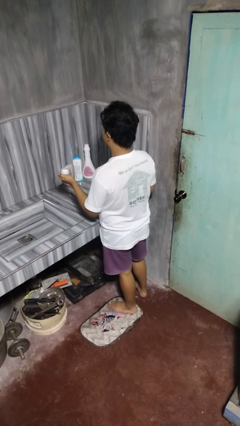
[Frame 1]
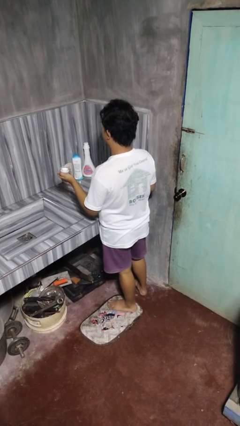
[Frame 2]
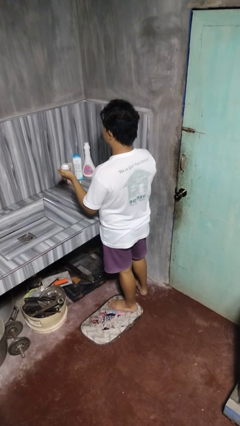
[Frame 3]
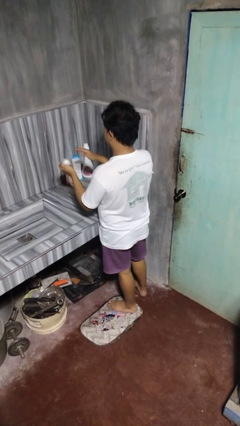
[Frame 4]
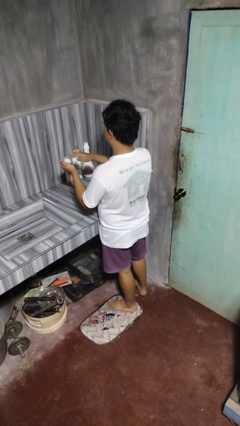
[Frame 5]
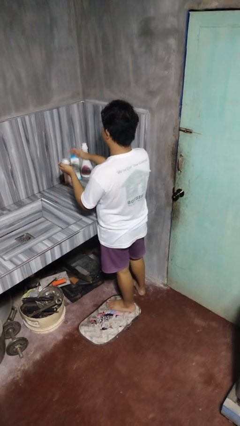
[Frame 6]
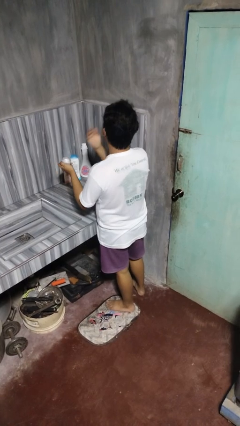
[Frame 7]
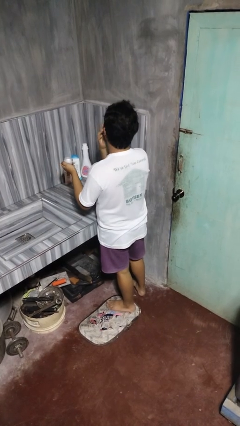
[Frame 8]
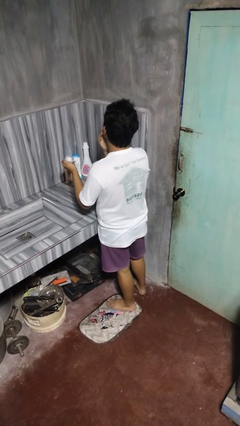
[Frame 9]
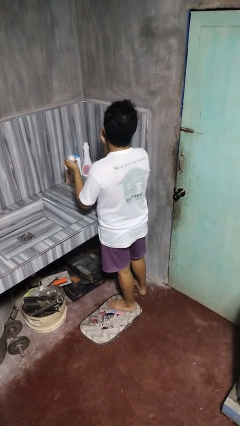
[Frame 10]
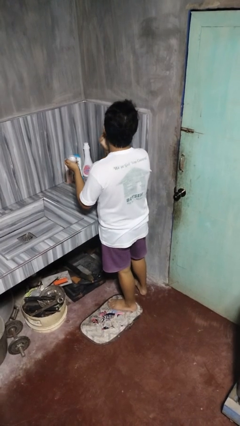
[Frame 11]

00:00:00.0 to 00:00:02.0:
person applies facial moisturizer

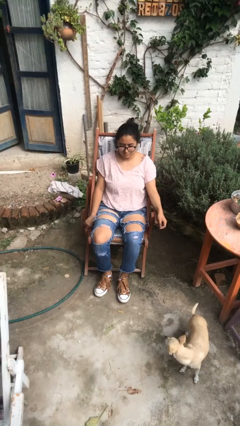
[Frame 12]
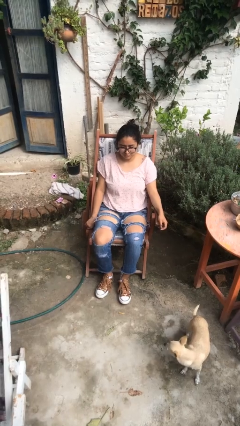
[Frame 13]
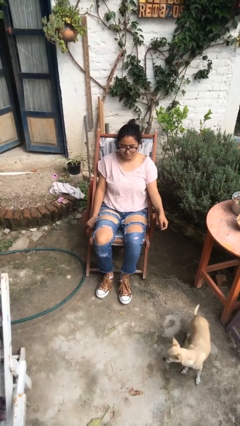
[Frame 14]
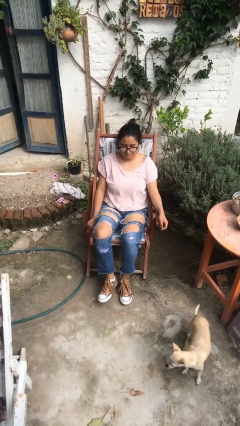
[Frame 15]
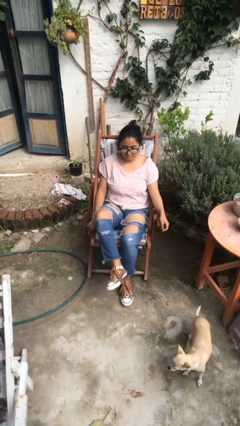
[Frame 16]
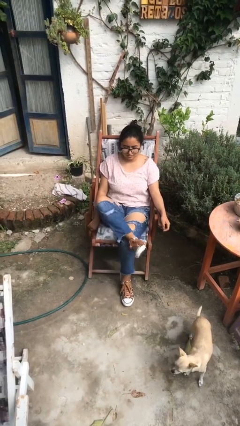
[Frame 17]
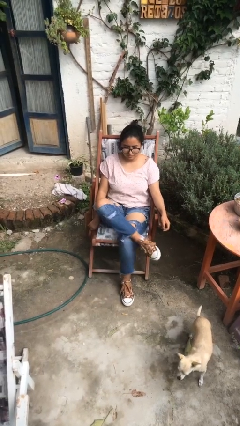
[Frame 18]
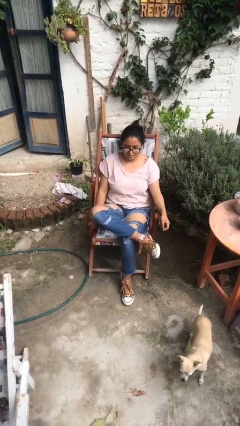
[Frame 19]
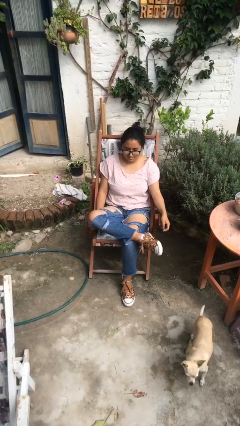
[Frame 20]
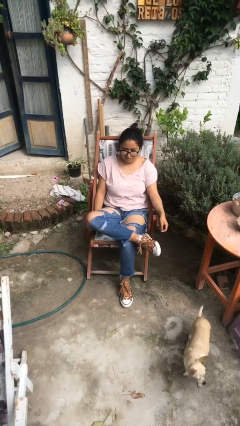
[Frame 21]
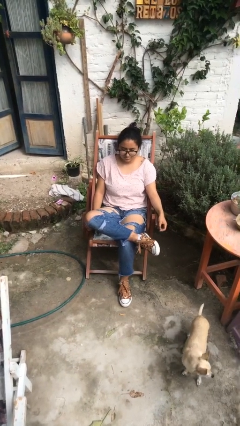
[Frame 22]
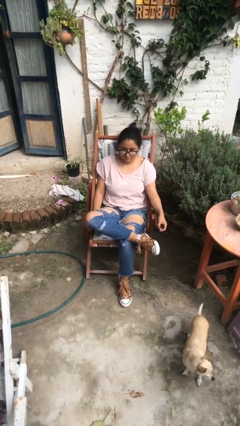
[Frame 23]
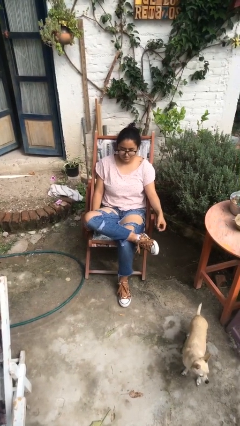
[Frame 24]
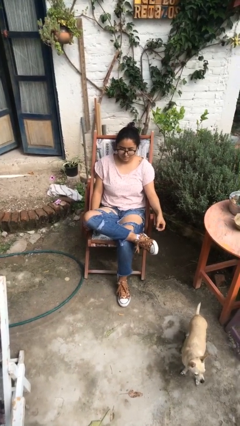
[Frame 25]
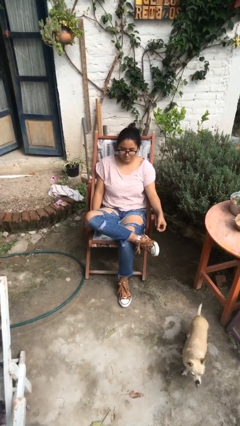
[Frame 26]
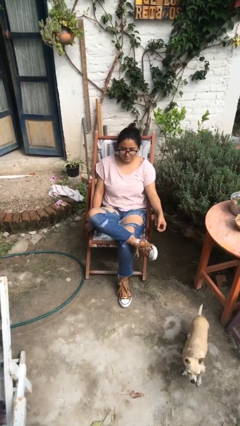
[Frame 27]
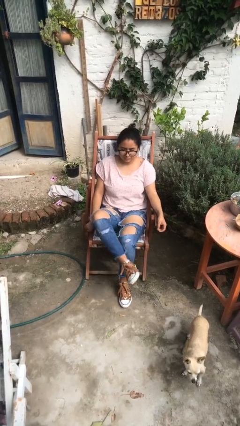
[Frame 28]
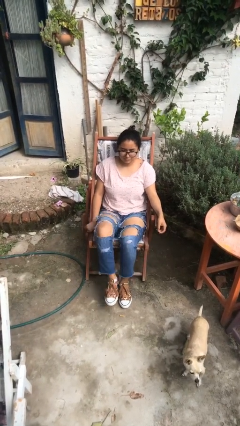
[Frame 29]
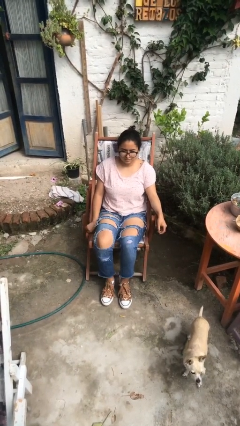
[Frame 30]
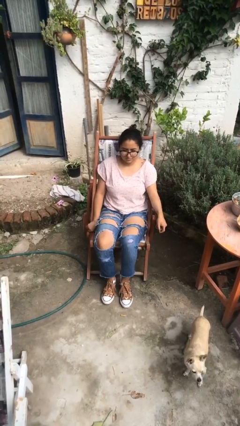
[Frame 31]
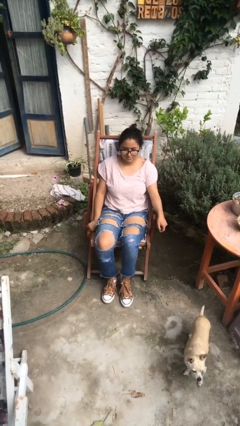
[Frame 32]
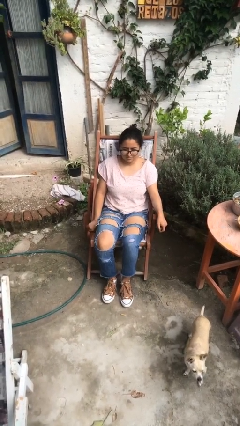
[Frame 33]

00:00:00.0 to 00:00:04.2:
person crosses legs

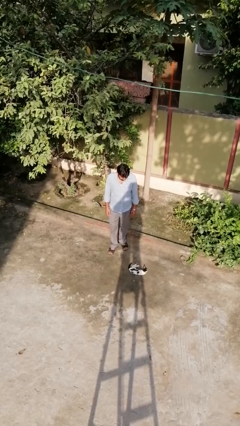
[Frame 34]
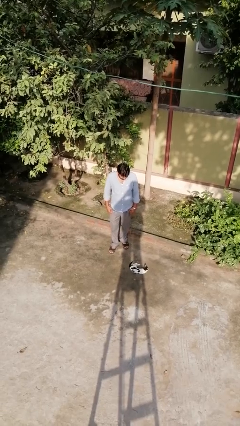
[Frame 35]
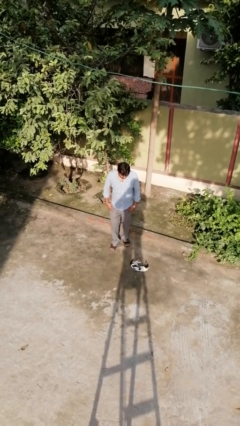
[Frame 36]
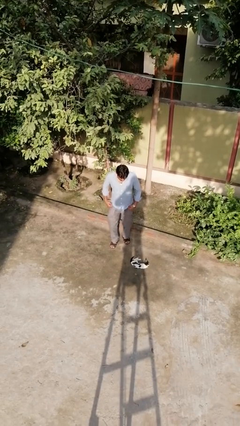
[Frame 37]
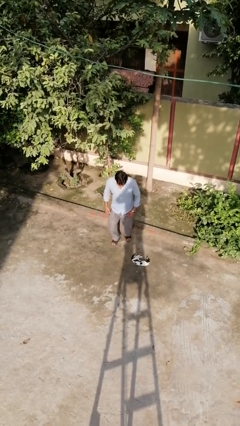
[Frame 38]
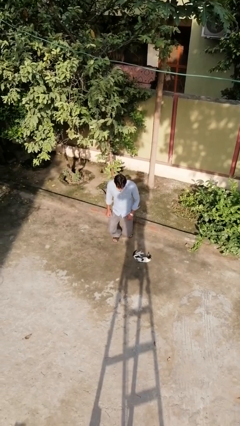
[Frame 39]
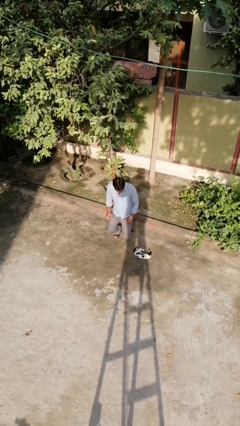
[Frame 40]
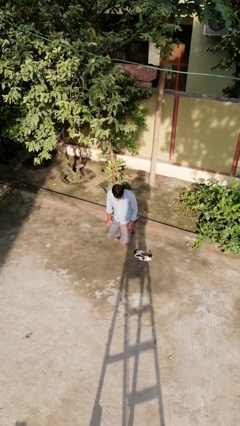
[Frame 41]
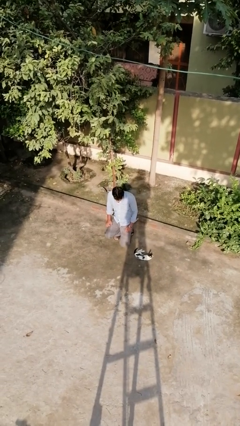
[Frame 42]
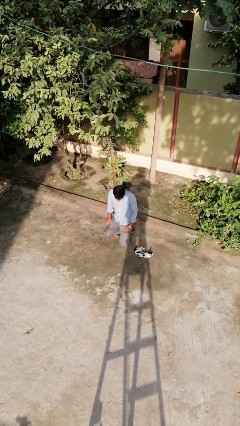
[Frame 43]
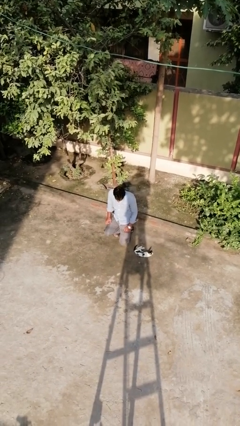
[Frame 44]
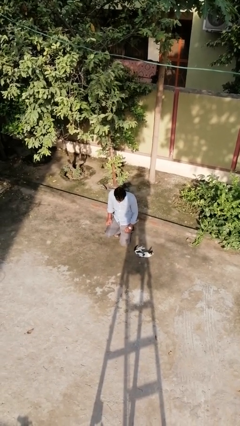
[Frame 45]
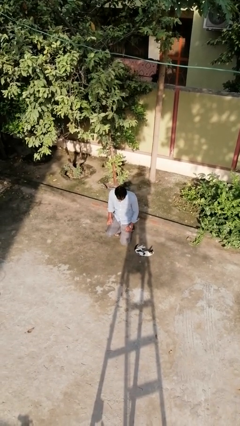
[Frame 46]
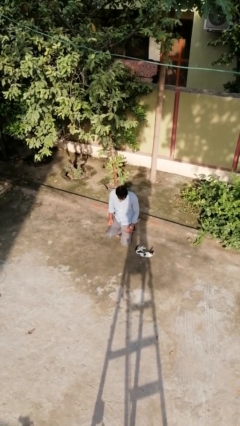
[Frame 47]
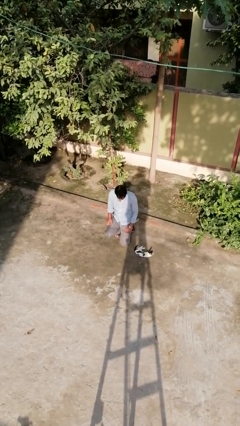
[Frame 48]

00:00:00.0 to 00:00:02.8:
person kneels

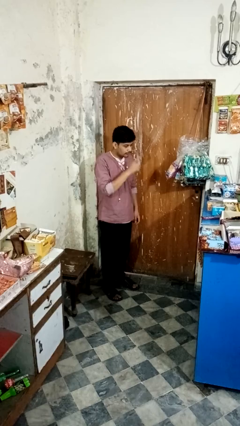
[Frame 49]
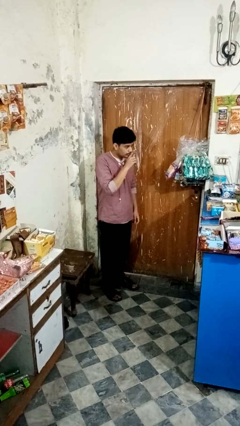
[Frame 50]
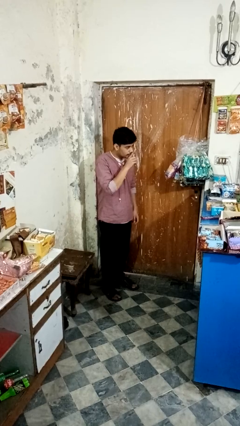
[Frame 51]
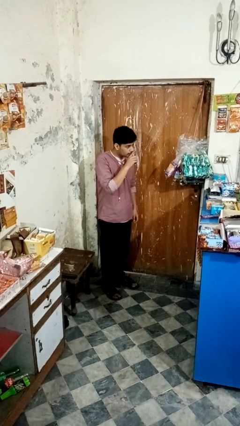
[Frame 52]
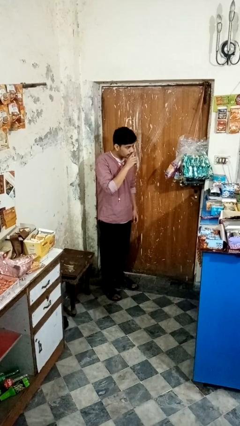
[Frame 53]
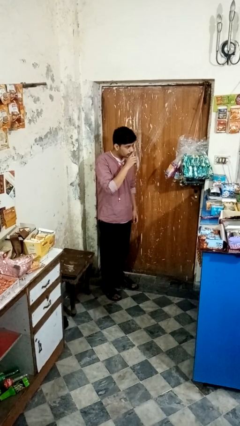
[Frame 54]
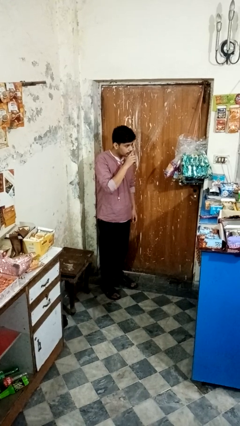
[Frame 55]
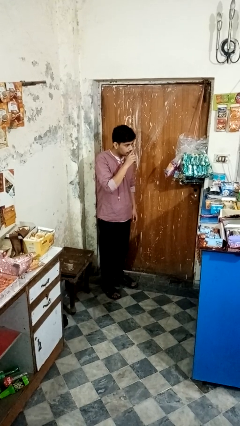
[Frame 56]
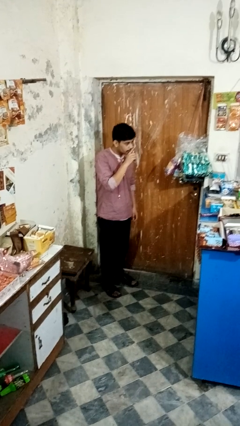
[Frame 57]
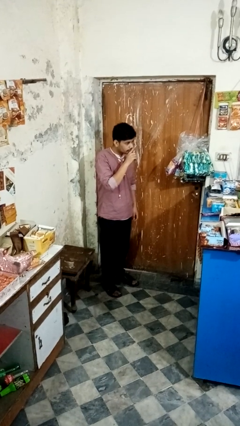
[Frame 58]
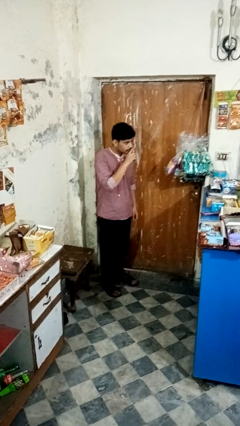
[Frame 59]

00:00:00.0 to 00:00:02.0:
person gestures be quiet

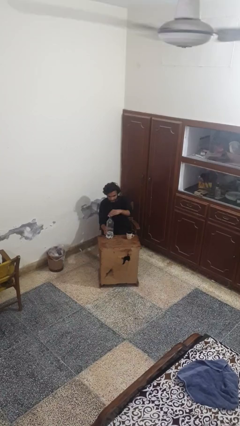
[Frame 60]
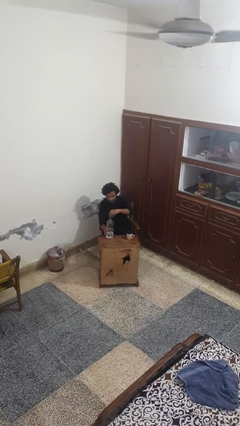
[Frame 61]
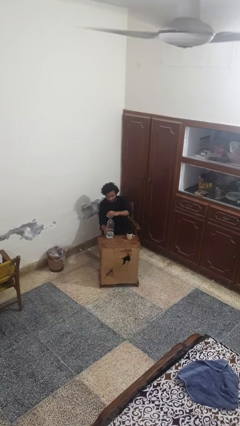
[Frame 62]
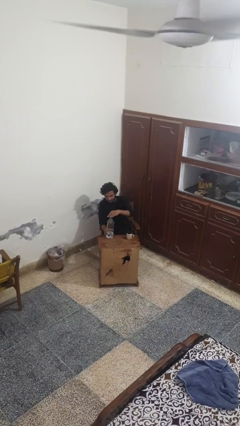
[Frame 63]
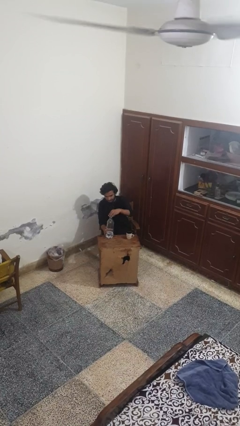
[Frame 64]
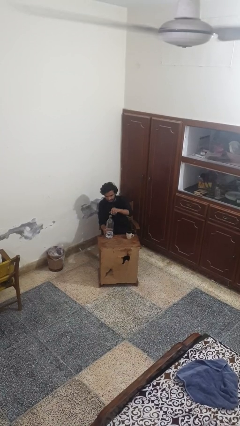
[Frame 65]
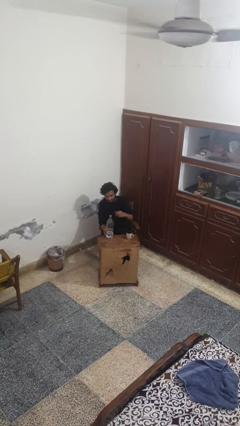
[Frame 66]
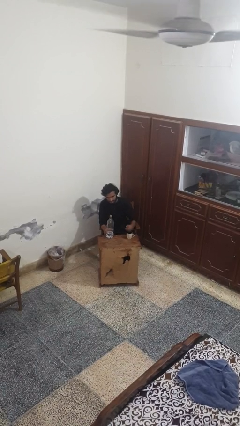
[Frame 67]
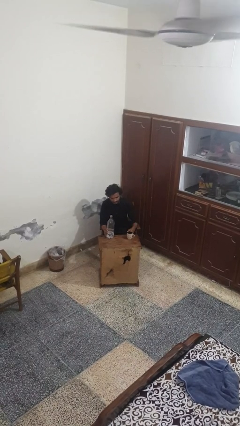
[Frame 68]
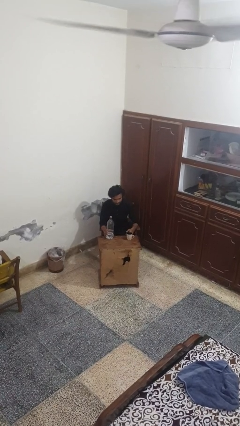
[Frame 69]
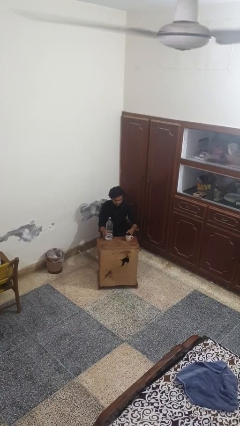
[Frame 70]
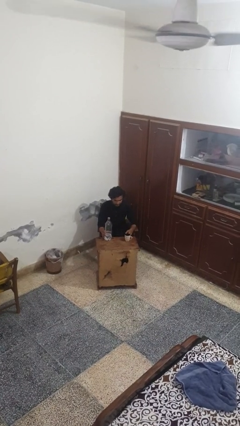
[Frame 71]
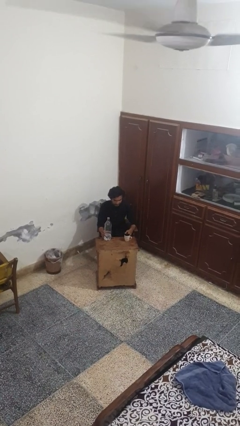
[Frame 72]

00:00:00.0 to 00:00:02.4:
person unscrews lid from bottle

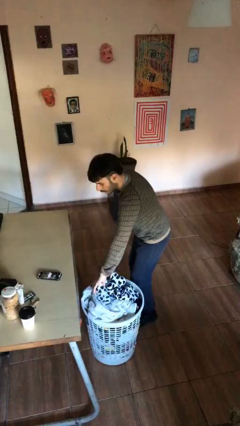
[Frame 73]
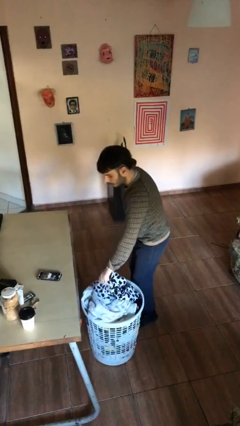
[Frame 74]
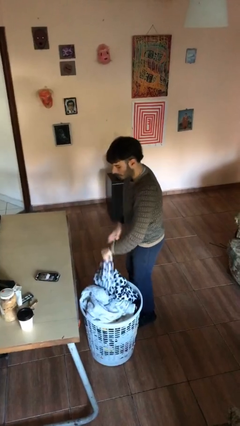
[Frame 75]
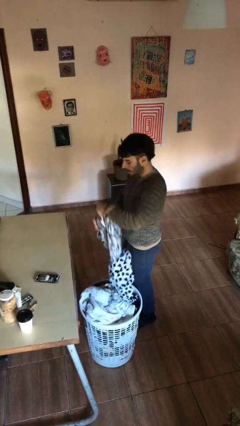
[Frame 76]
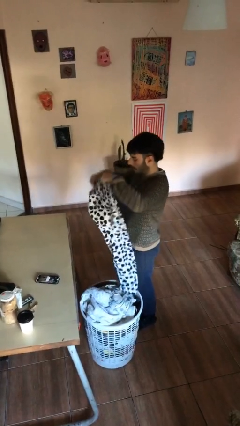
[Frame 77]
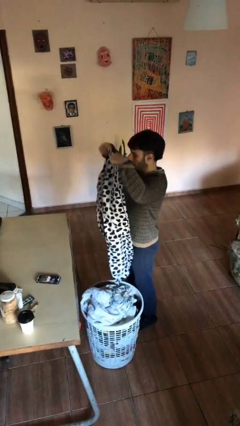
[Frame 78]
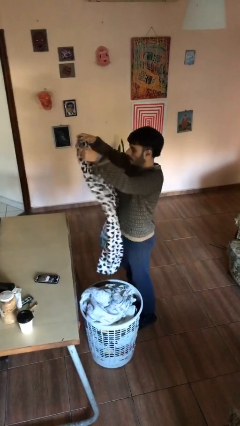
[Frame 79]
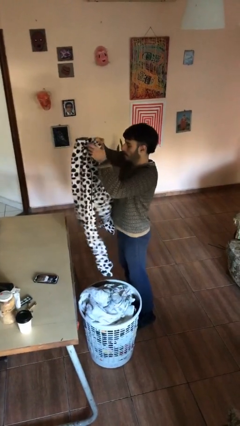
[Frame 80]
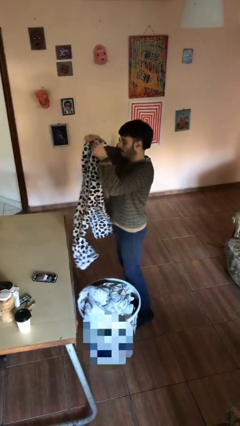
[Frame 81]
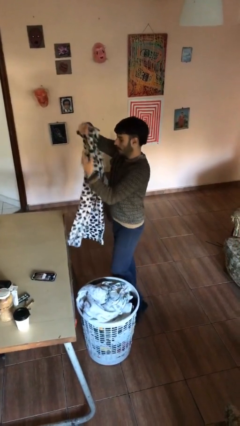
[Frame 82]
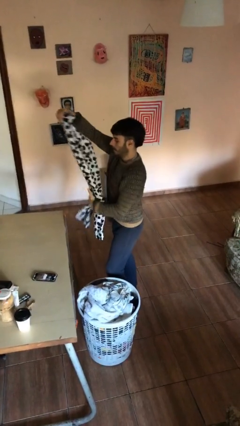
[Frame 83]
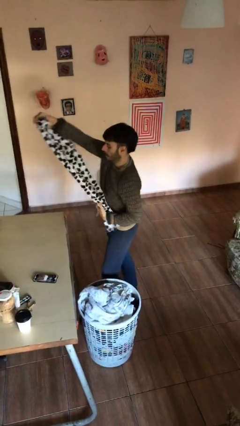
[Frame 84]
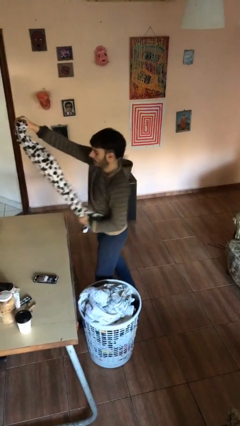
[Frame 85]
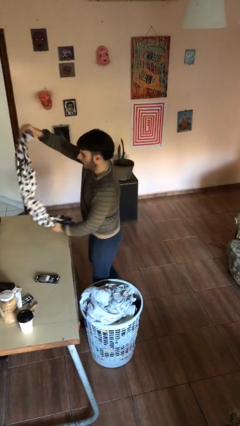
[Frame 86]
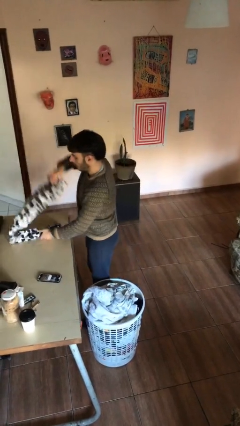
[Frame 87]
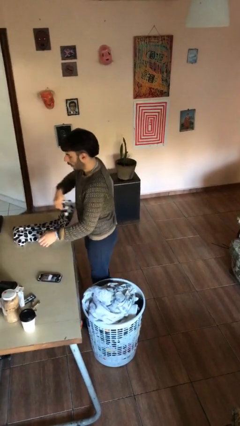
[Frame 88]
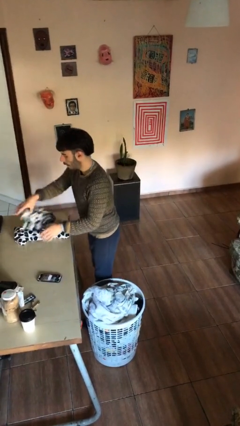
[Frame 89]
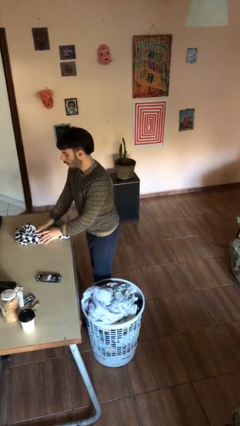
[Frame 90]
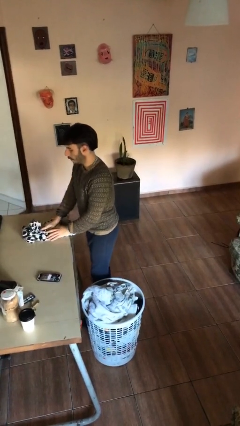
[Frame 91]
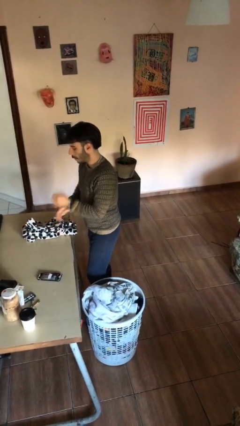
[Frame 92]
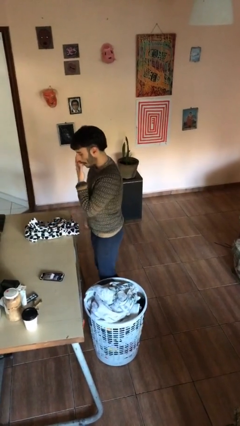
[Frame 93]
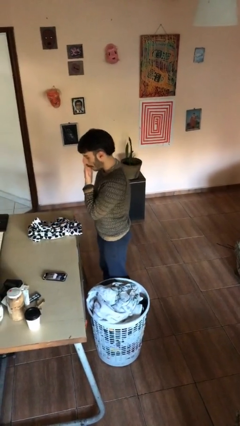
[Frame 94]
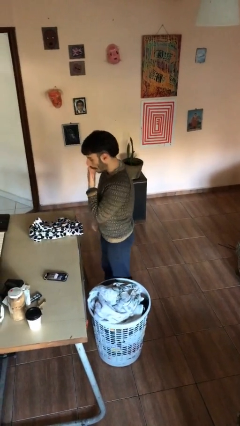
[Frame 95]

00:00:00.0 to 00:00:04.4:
person folds pants
